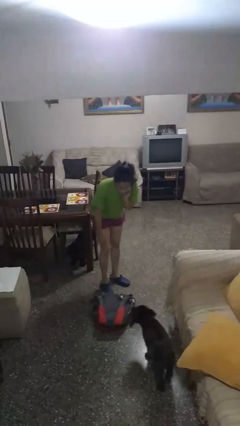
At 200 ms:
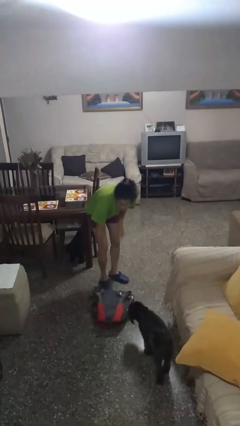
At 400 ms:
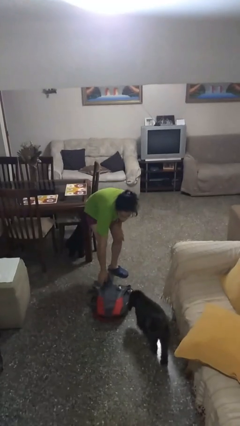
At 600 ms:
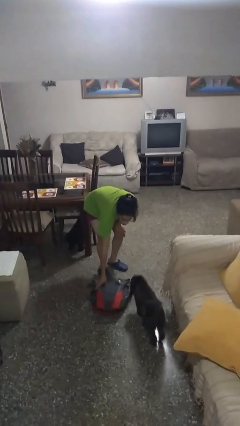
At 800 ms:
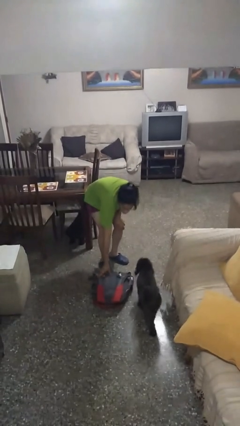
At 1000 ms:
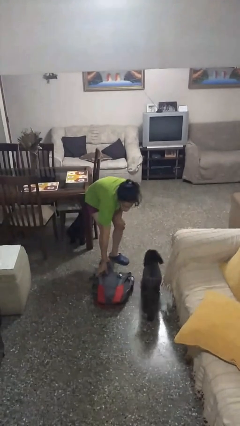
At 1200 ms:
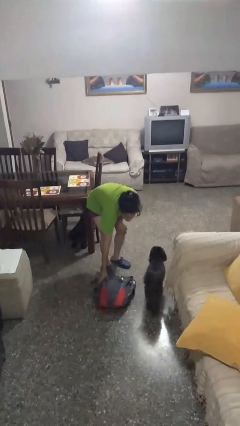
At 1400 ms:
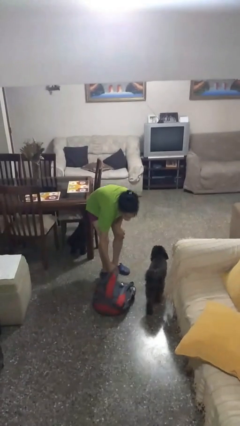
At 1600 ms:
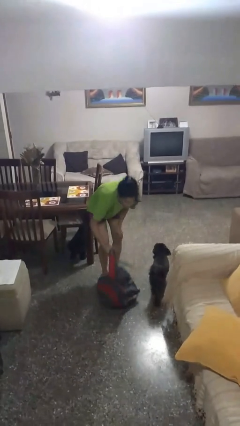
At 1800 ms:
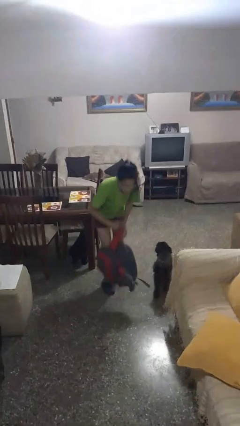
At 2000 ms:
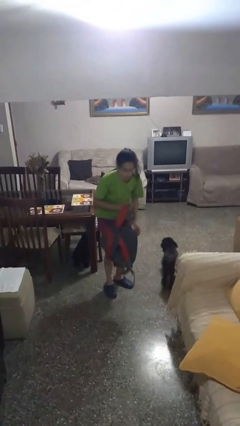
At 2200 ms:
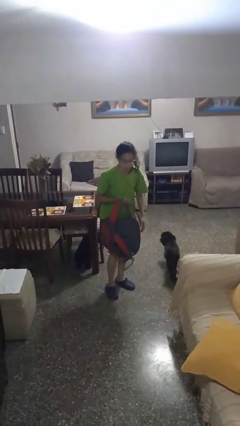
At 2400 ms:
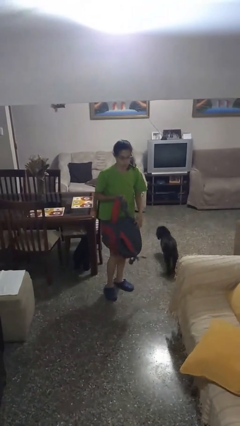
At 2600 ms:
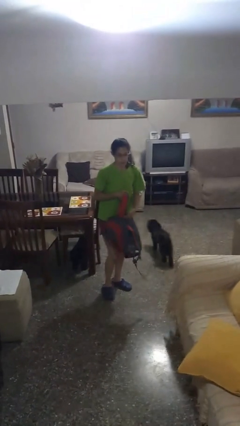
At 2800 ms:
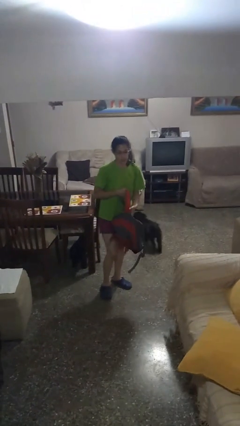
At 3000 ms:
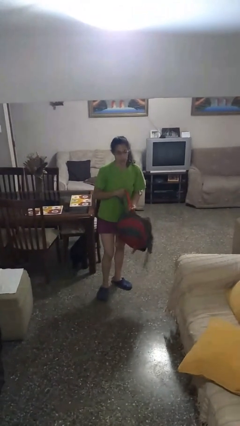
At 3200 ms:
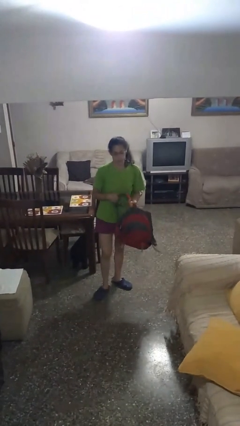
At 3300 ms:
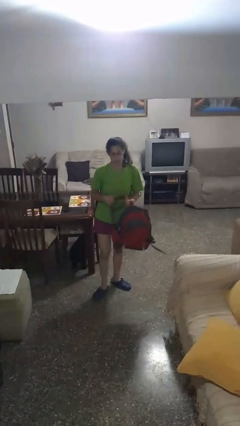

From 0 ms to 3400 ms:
person picks up object from floor

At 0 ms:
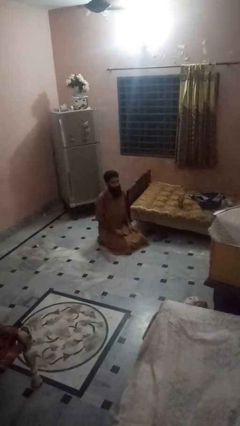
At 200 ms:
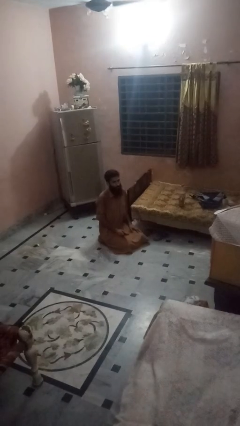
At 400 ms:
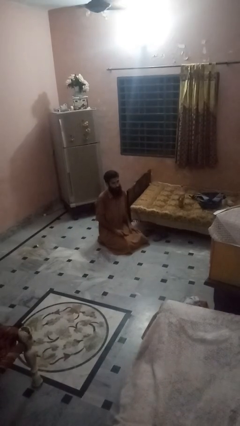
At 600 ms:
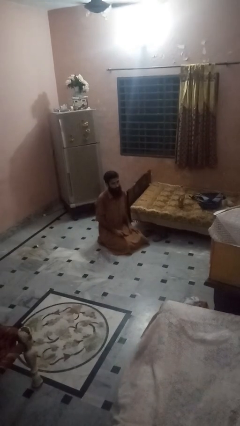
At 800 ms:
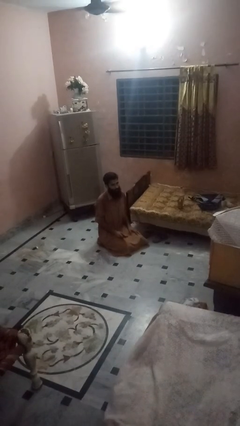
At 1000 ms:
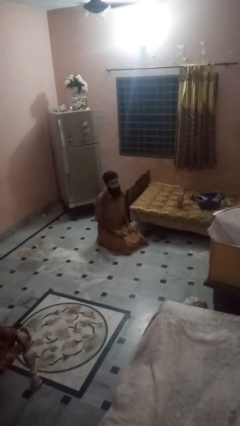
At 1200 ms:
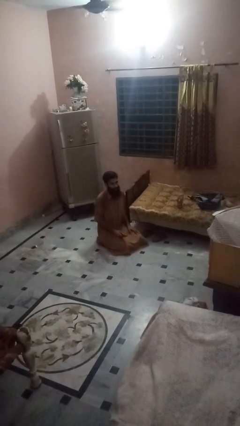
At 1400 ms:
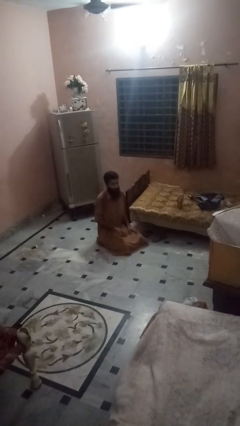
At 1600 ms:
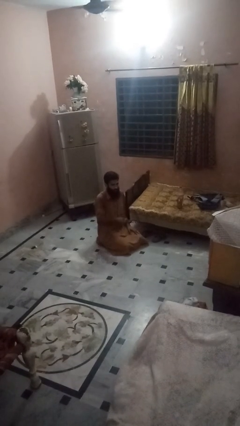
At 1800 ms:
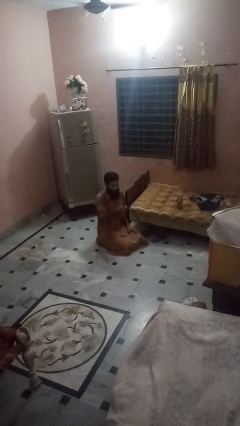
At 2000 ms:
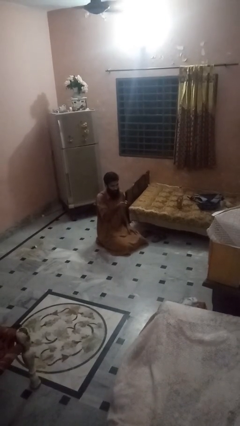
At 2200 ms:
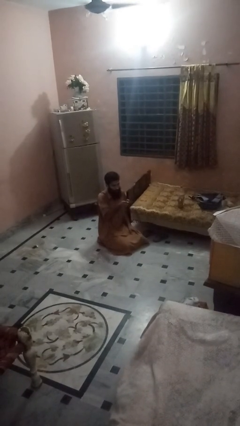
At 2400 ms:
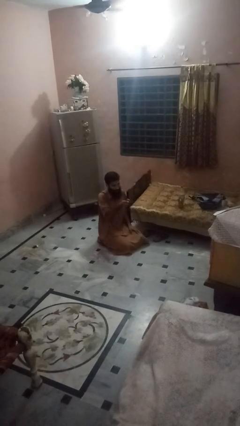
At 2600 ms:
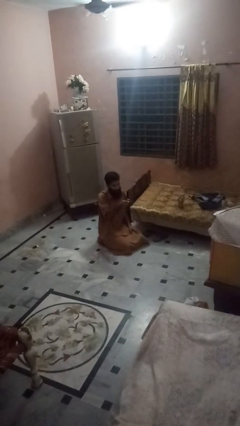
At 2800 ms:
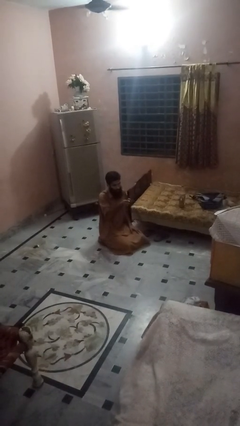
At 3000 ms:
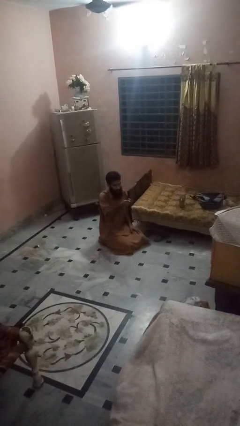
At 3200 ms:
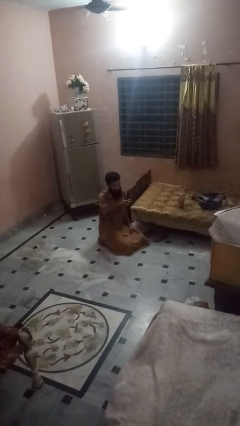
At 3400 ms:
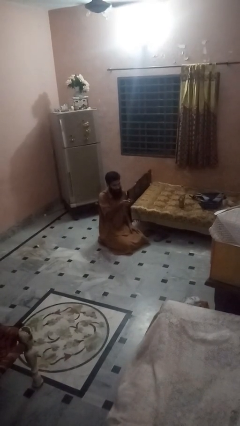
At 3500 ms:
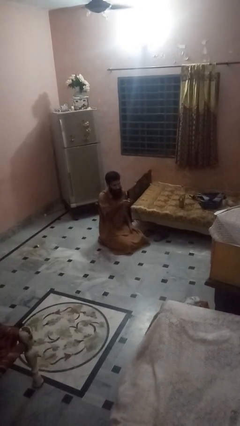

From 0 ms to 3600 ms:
person uses television remote

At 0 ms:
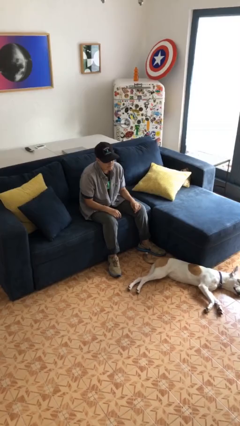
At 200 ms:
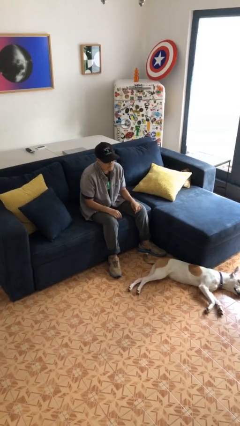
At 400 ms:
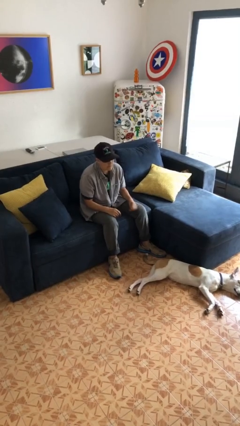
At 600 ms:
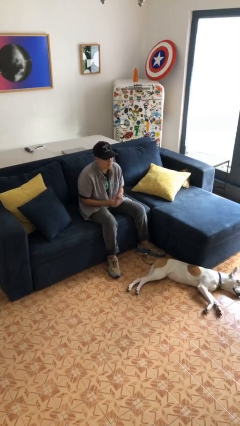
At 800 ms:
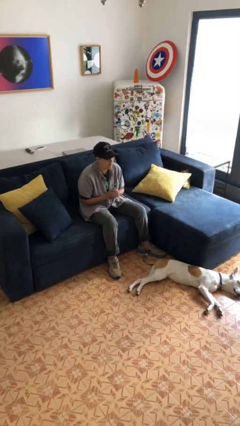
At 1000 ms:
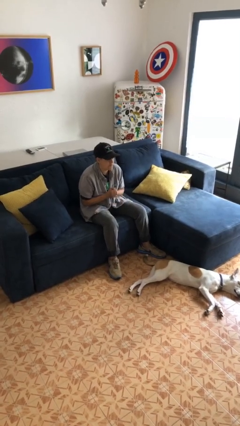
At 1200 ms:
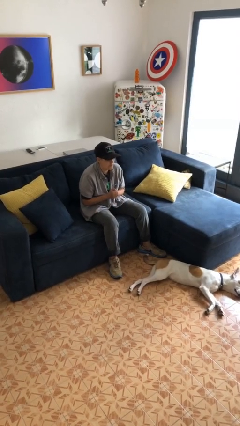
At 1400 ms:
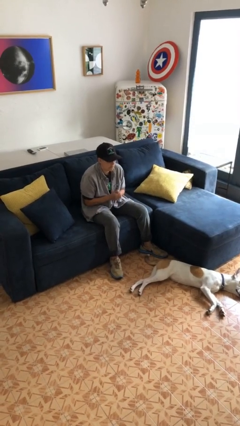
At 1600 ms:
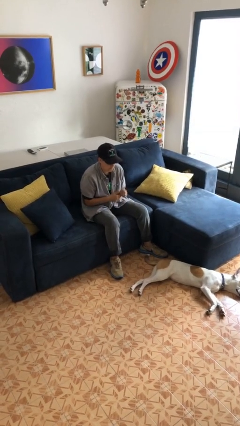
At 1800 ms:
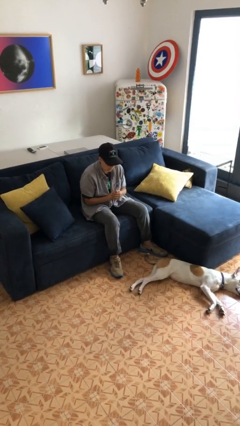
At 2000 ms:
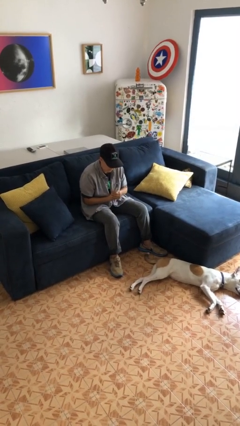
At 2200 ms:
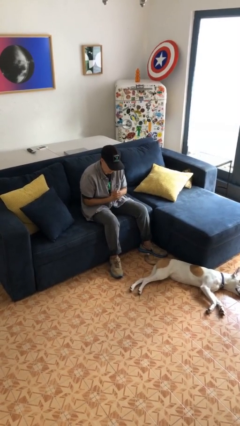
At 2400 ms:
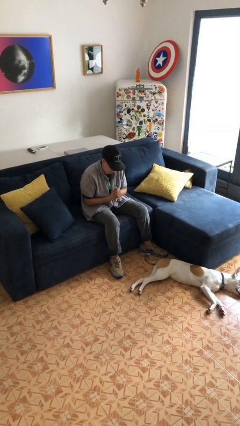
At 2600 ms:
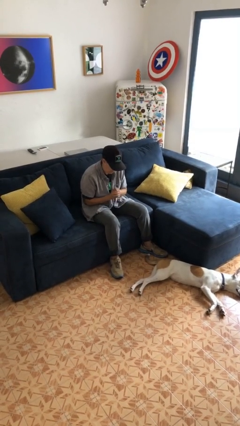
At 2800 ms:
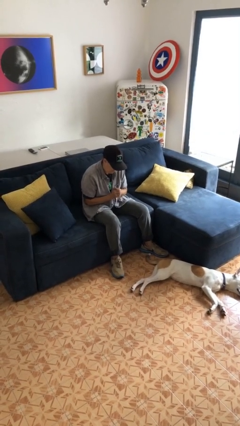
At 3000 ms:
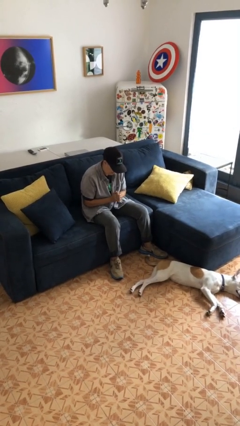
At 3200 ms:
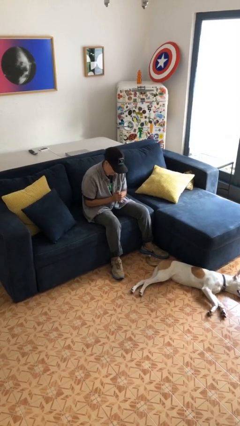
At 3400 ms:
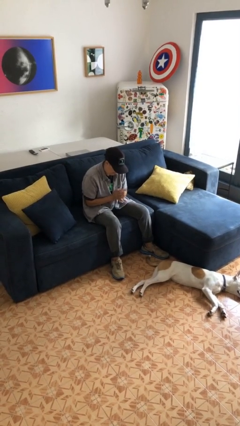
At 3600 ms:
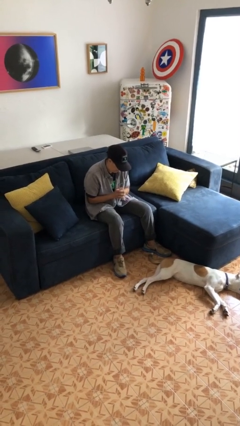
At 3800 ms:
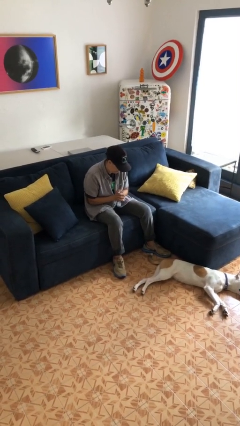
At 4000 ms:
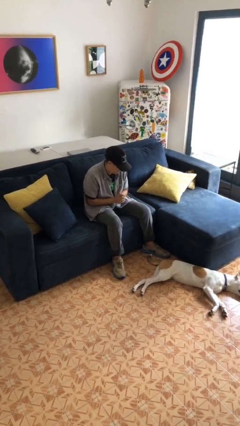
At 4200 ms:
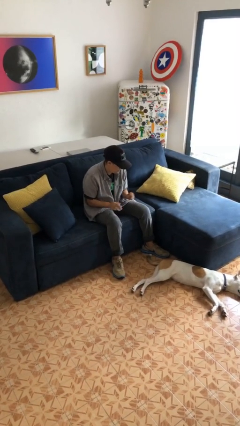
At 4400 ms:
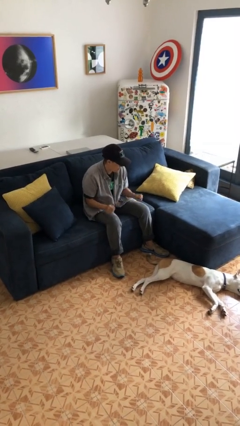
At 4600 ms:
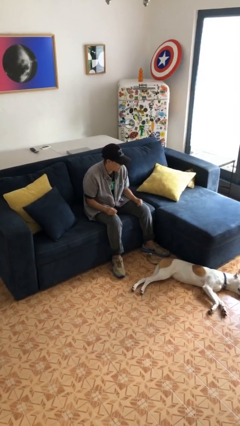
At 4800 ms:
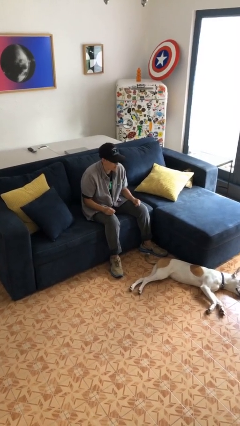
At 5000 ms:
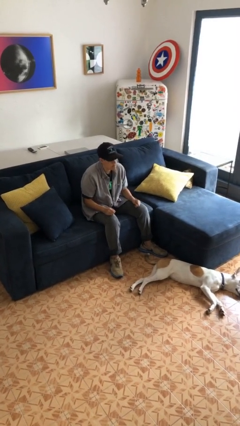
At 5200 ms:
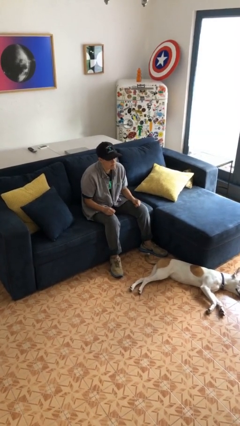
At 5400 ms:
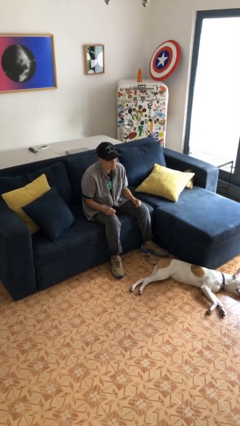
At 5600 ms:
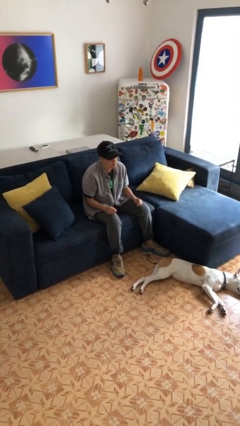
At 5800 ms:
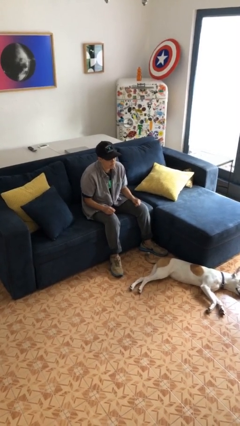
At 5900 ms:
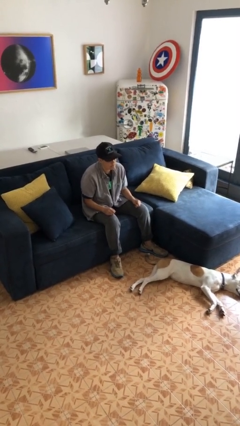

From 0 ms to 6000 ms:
person looks at hands in lap

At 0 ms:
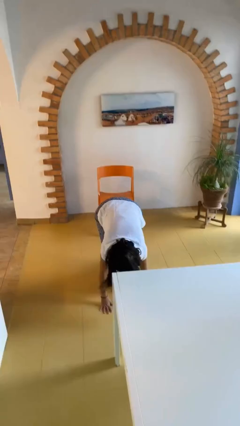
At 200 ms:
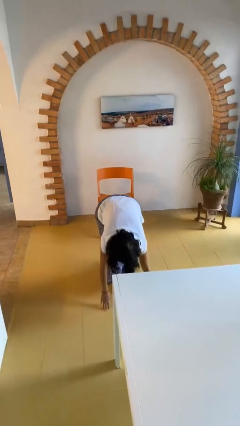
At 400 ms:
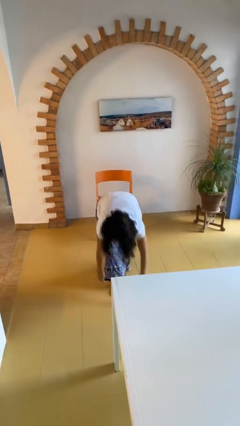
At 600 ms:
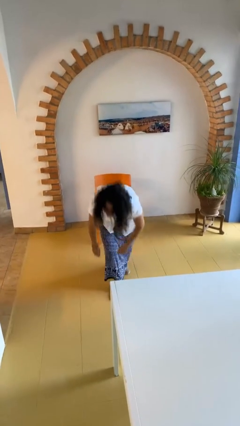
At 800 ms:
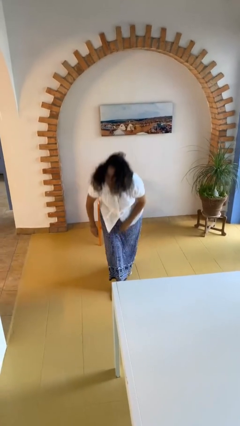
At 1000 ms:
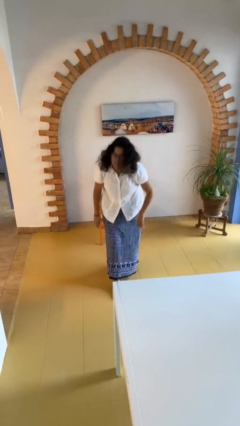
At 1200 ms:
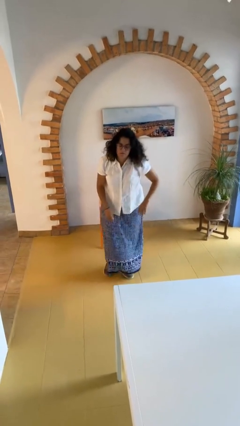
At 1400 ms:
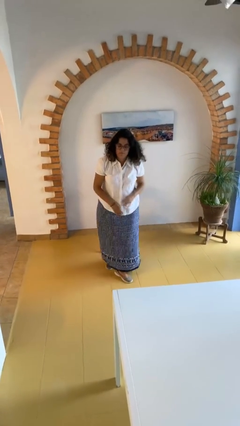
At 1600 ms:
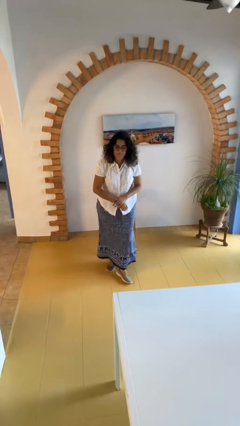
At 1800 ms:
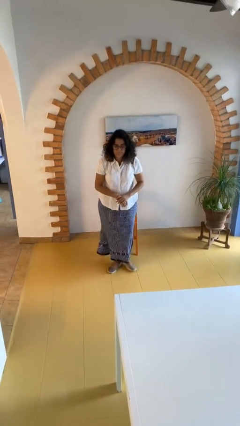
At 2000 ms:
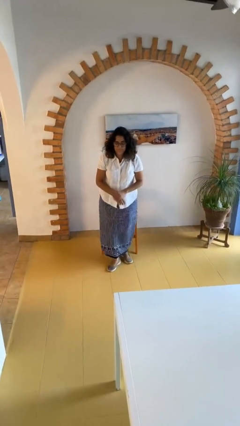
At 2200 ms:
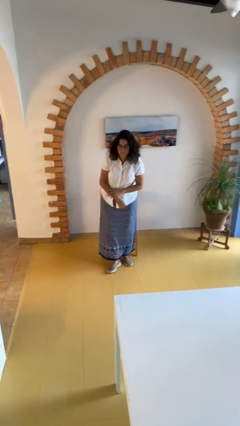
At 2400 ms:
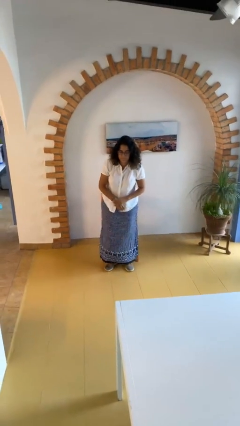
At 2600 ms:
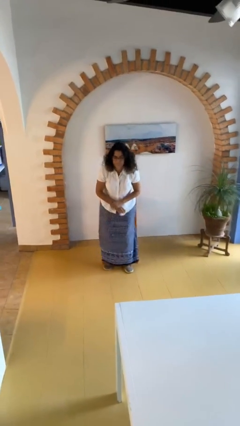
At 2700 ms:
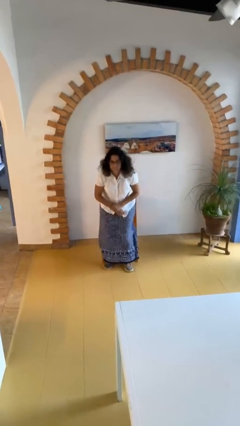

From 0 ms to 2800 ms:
person stands up from floor

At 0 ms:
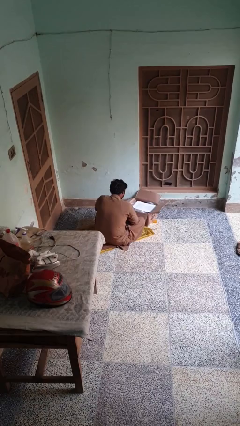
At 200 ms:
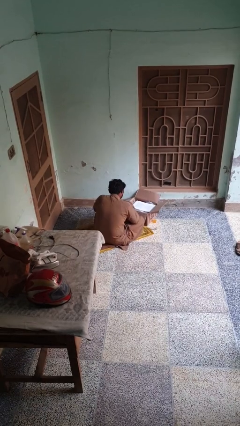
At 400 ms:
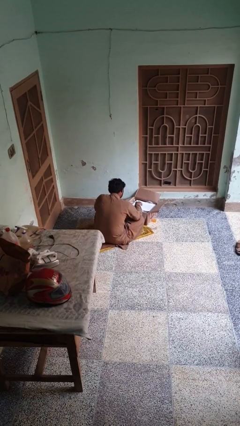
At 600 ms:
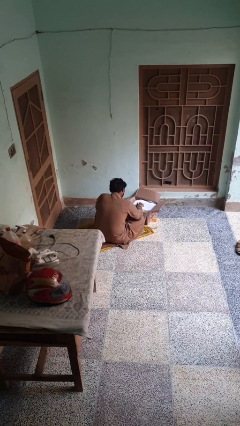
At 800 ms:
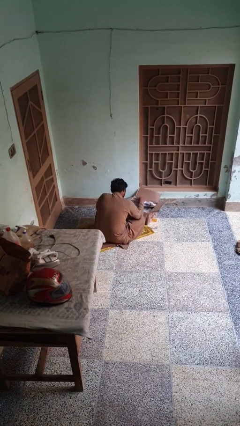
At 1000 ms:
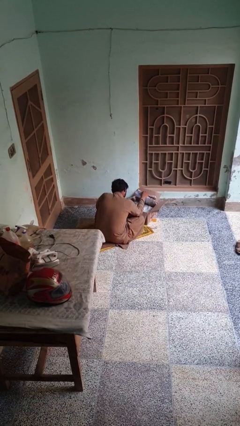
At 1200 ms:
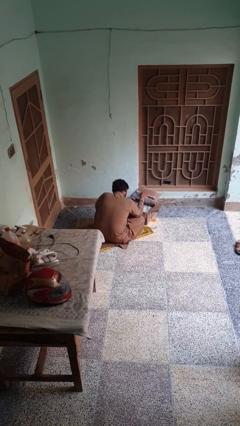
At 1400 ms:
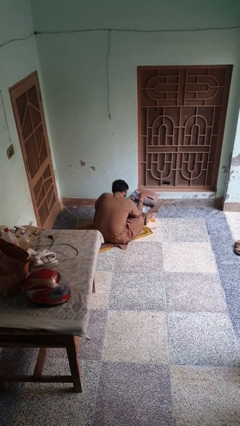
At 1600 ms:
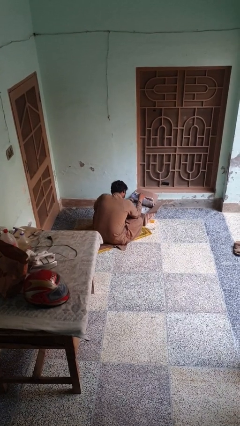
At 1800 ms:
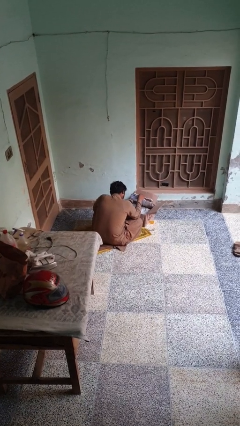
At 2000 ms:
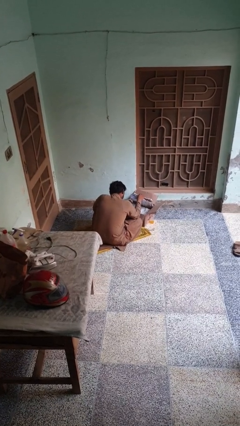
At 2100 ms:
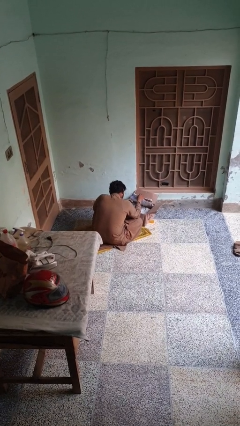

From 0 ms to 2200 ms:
person searches in box
